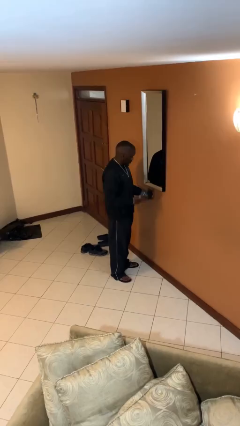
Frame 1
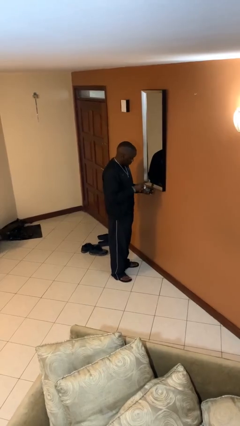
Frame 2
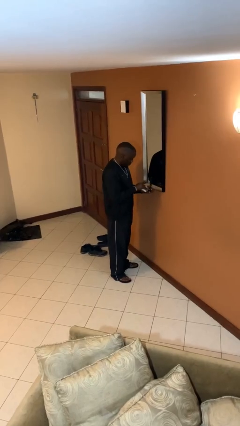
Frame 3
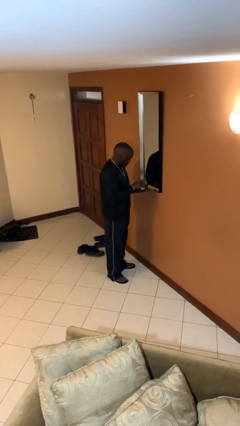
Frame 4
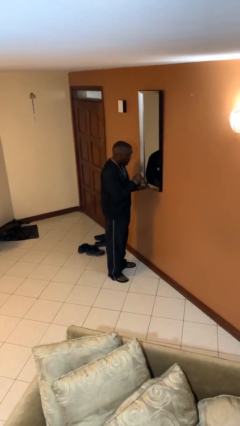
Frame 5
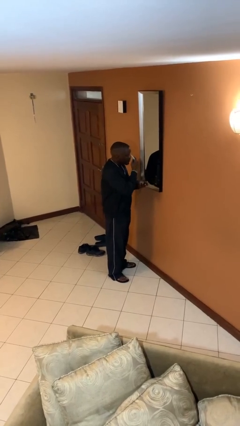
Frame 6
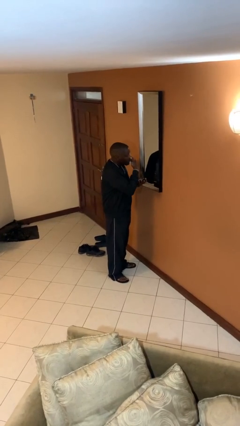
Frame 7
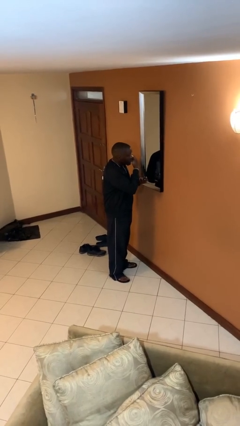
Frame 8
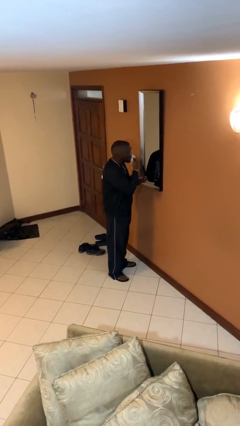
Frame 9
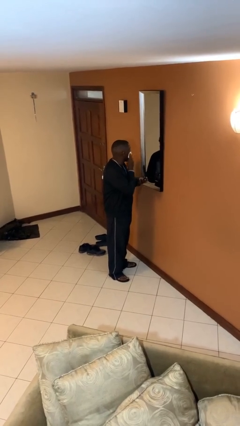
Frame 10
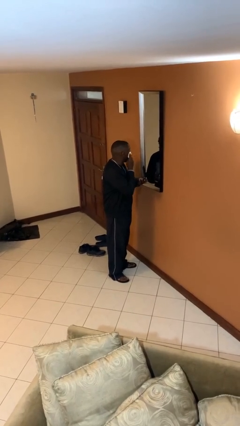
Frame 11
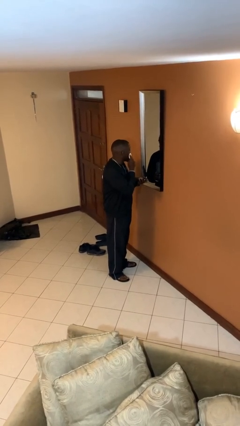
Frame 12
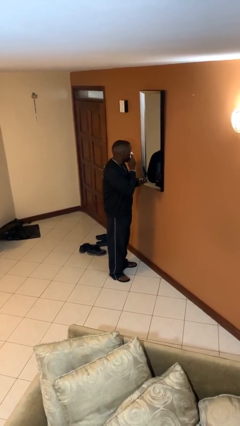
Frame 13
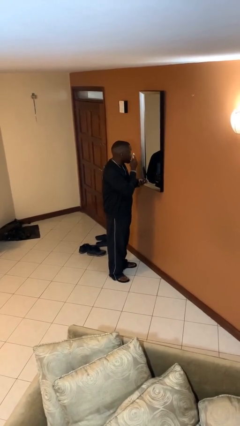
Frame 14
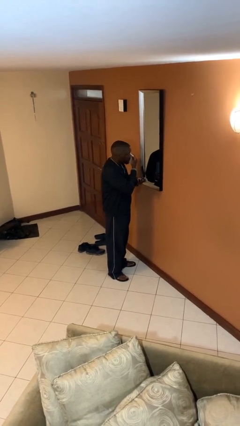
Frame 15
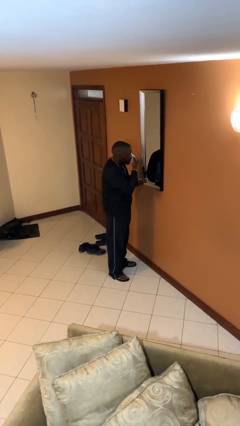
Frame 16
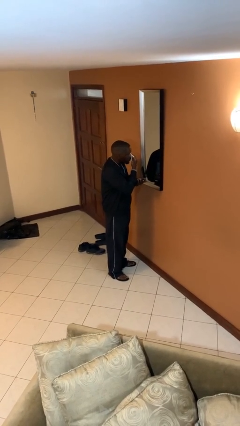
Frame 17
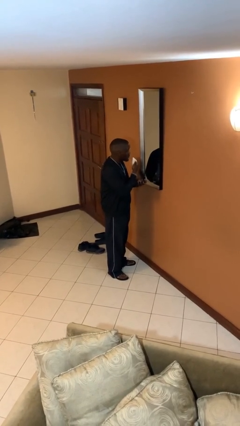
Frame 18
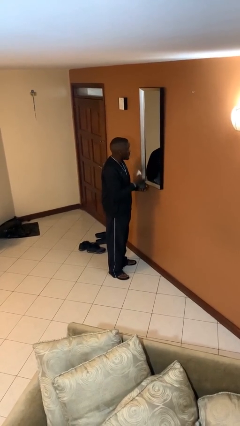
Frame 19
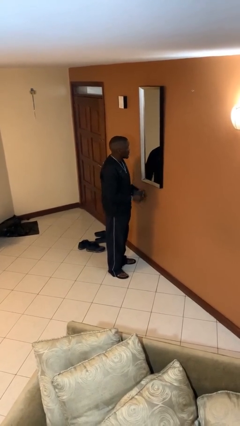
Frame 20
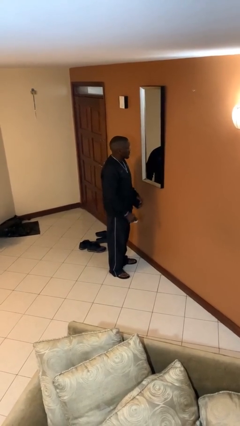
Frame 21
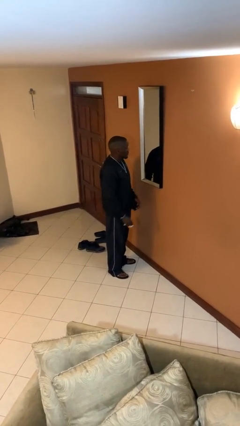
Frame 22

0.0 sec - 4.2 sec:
person applies foundation makeup

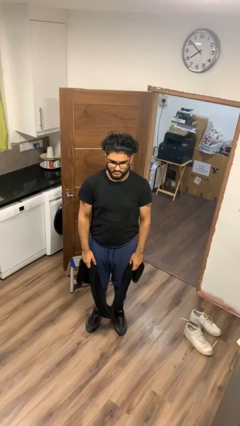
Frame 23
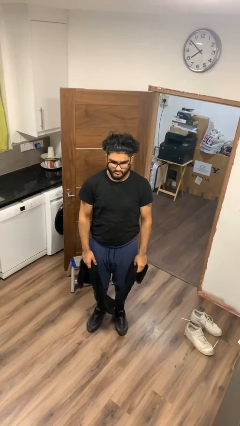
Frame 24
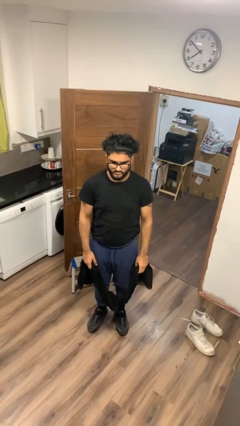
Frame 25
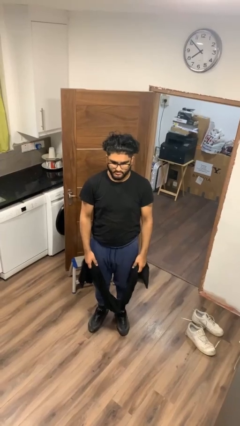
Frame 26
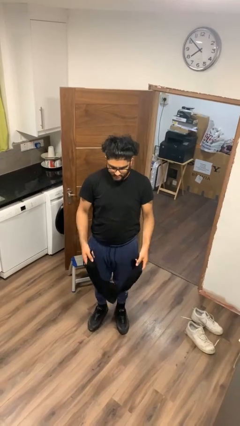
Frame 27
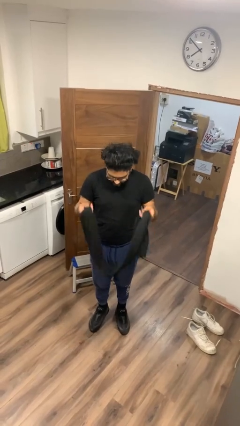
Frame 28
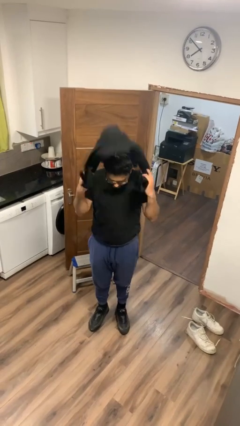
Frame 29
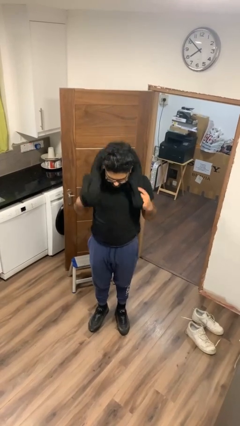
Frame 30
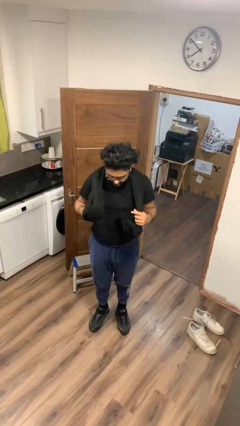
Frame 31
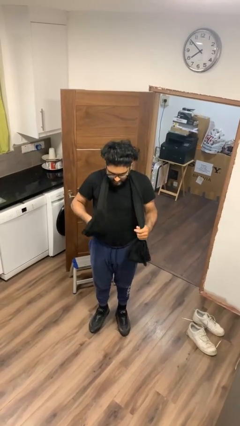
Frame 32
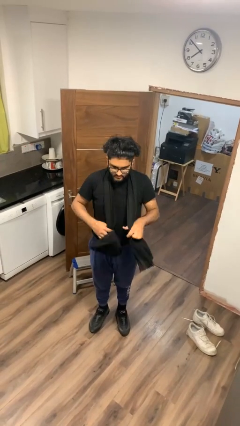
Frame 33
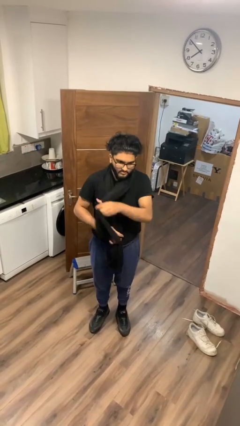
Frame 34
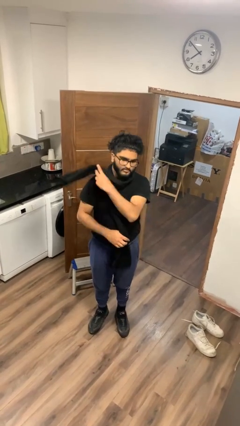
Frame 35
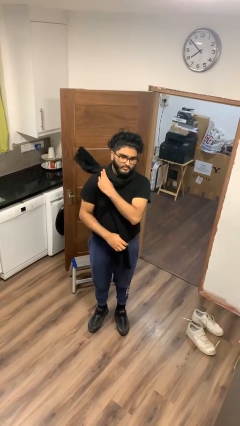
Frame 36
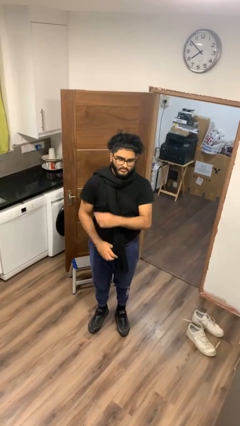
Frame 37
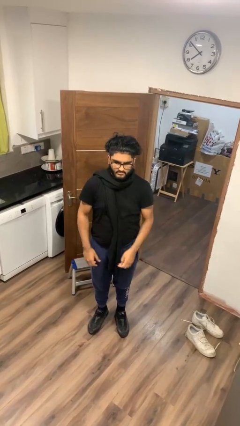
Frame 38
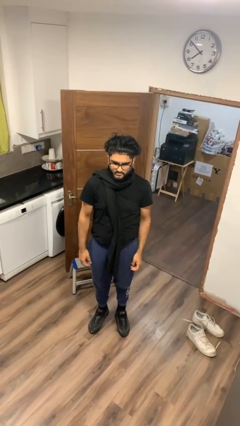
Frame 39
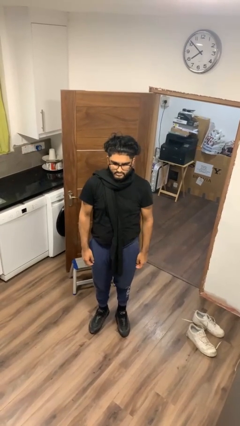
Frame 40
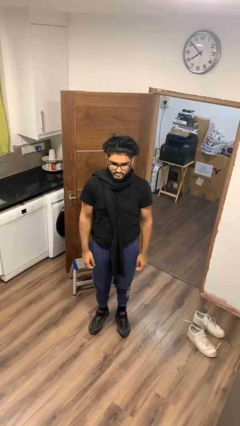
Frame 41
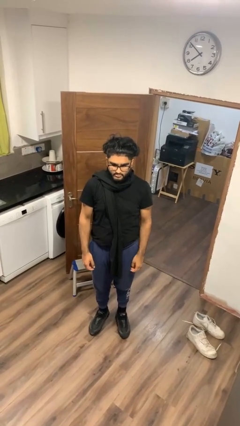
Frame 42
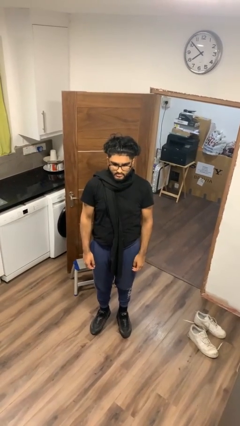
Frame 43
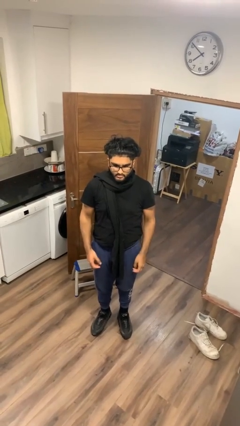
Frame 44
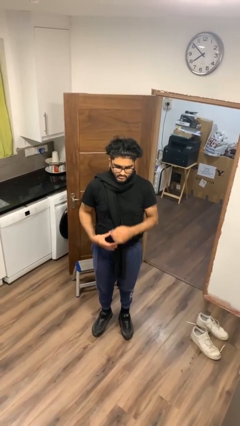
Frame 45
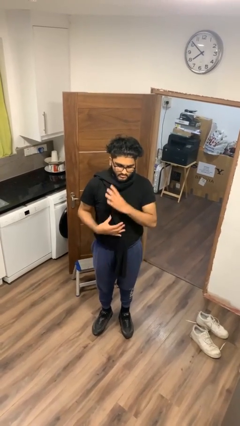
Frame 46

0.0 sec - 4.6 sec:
person puts on scarf

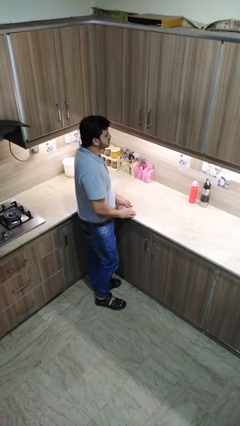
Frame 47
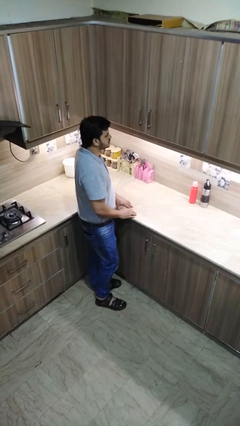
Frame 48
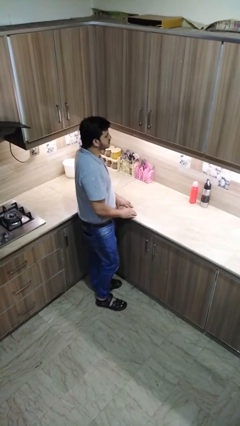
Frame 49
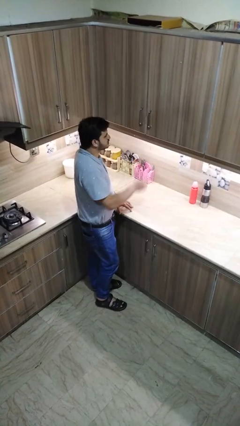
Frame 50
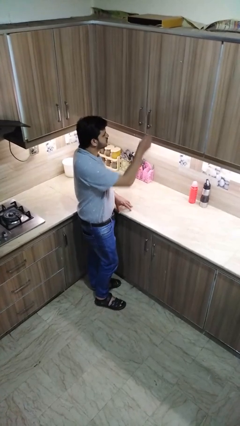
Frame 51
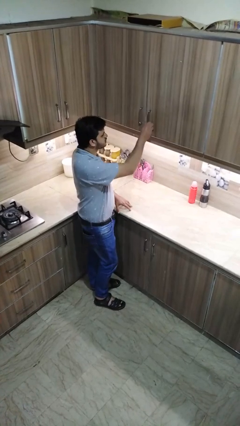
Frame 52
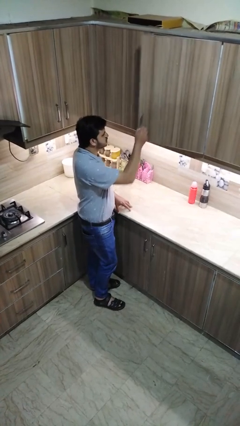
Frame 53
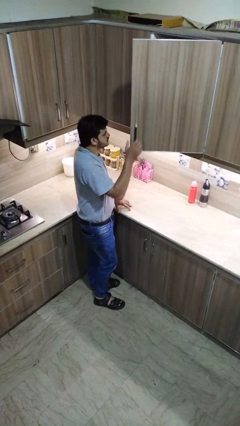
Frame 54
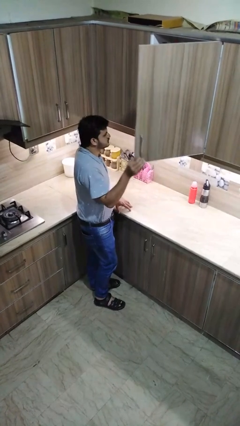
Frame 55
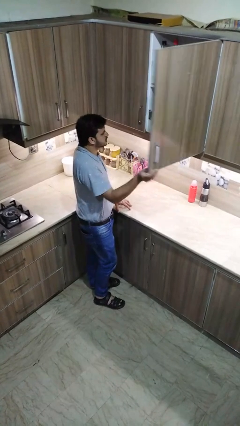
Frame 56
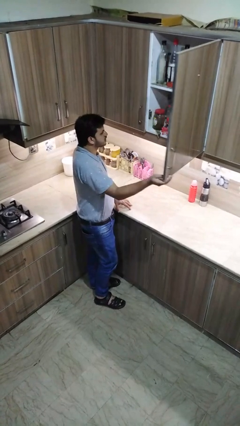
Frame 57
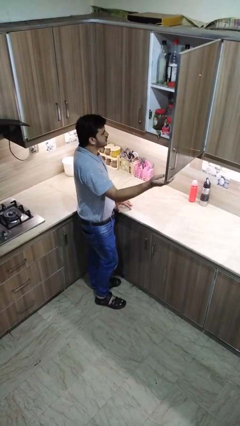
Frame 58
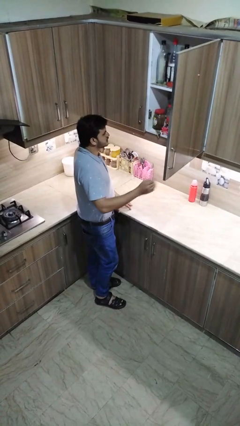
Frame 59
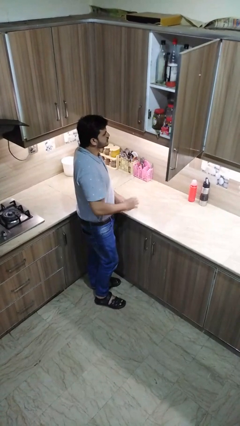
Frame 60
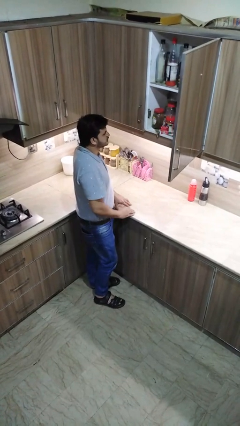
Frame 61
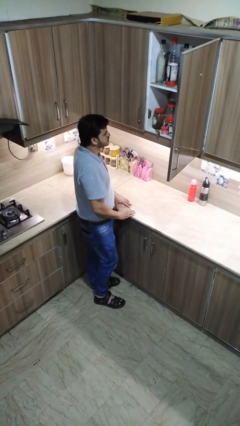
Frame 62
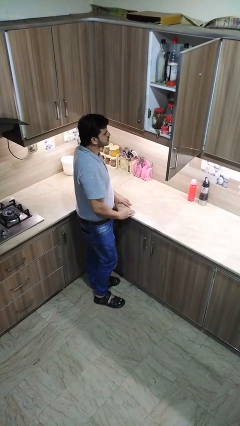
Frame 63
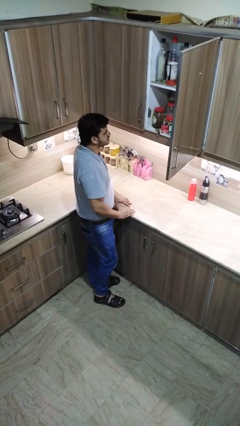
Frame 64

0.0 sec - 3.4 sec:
person opens cabinet

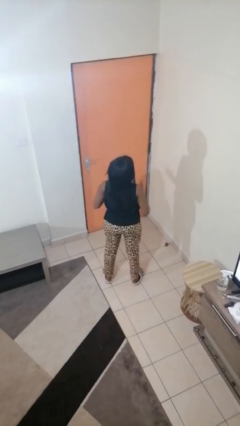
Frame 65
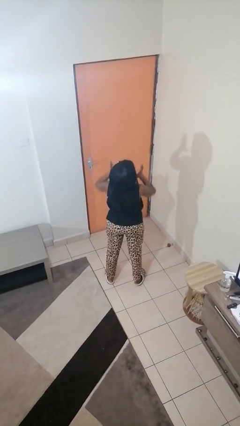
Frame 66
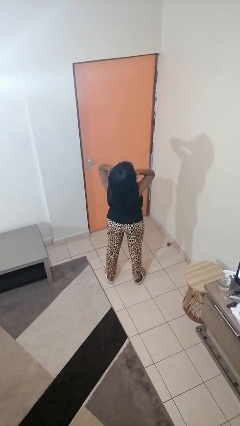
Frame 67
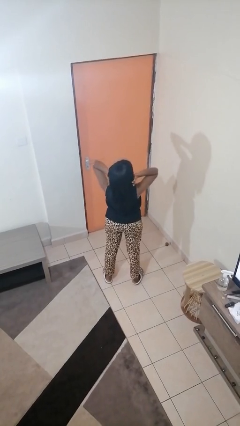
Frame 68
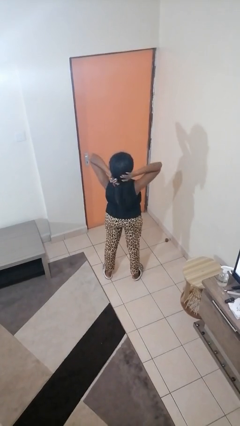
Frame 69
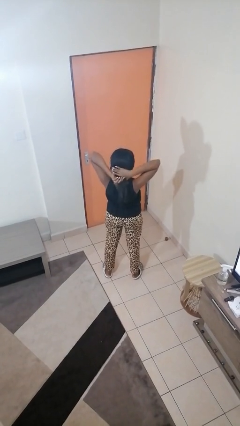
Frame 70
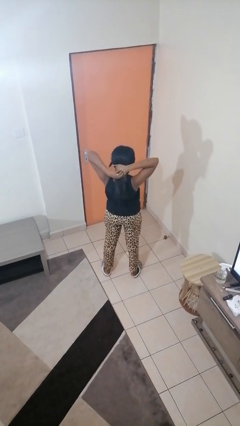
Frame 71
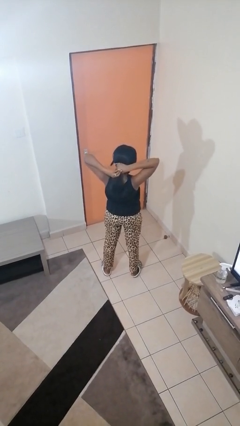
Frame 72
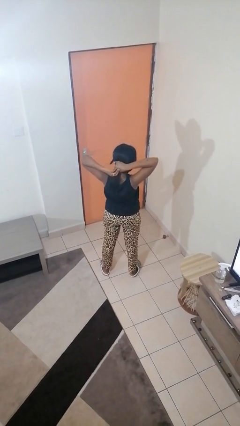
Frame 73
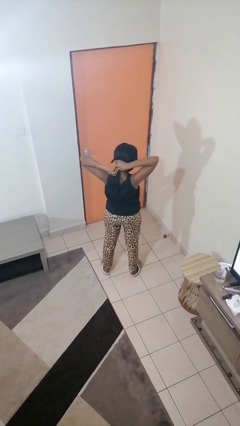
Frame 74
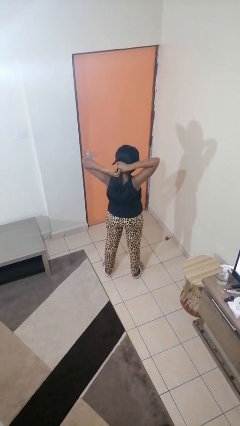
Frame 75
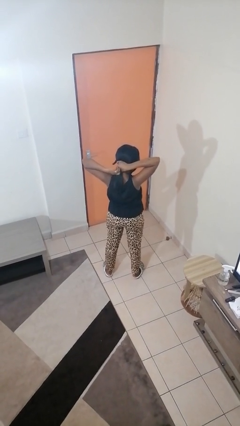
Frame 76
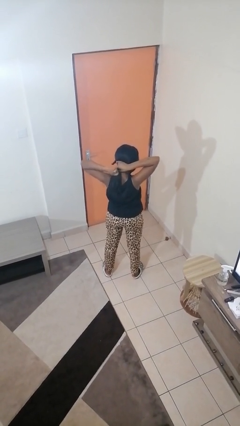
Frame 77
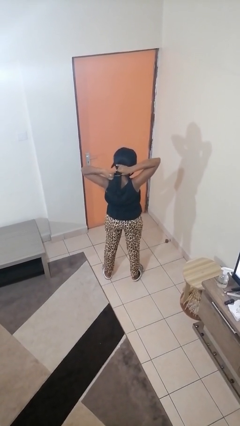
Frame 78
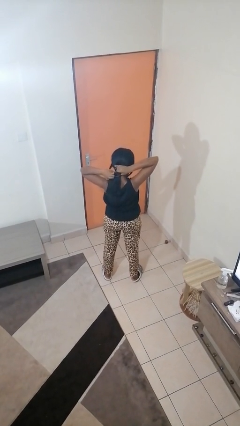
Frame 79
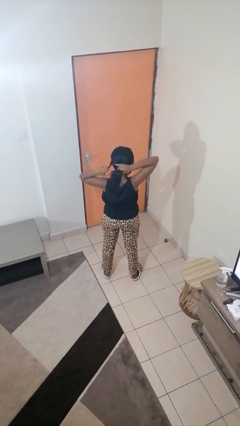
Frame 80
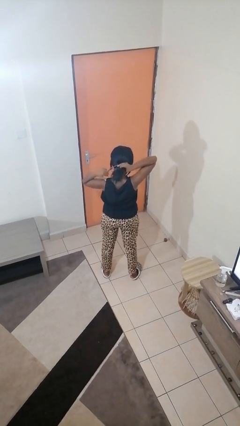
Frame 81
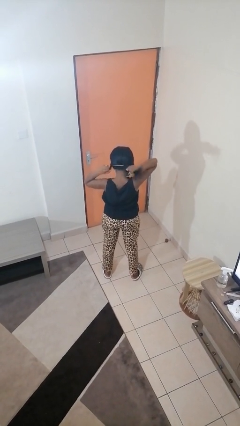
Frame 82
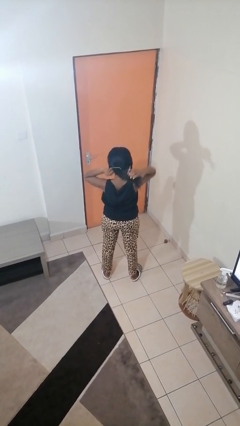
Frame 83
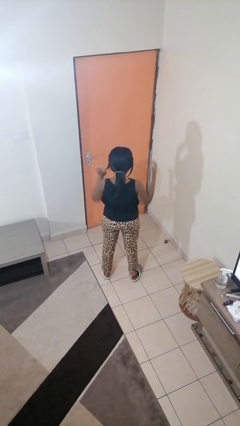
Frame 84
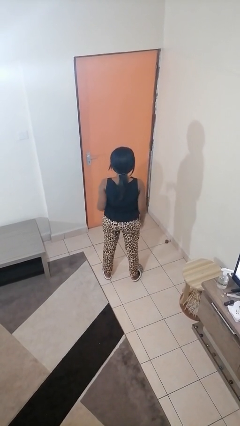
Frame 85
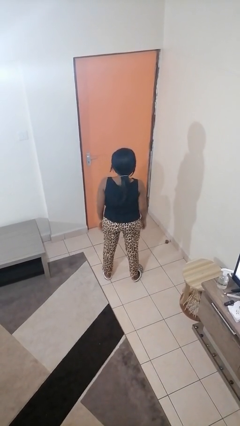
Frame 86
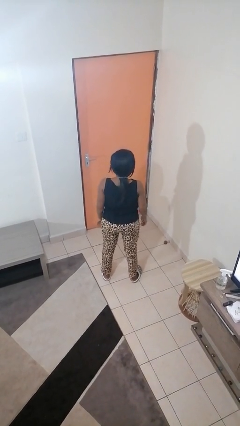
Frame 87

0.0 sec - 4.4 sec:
person puts hair in ponytail

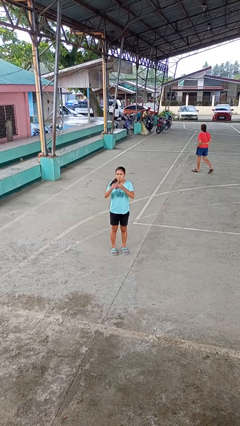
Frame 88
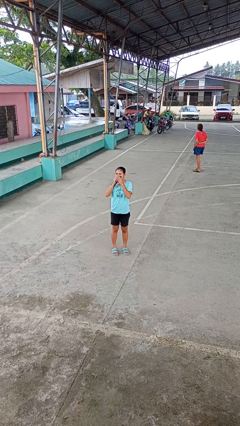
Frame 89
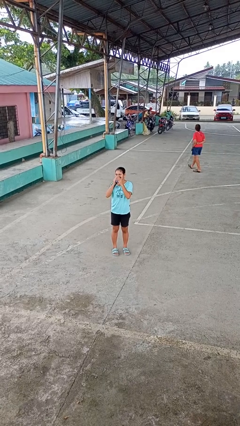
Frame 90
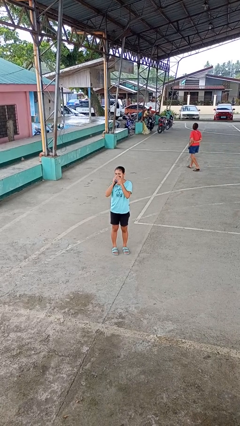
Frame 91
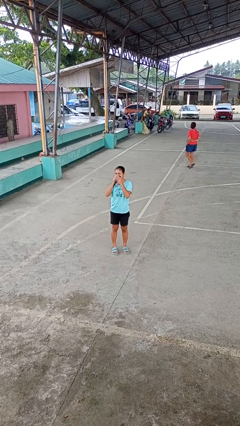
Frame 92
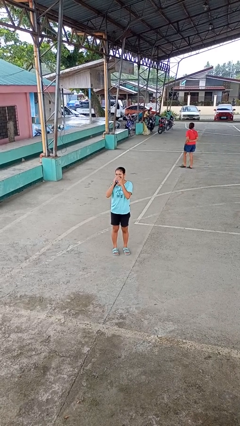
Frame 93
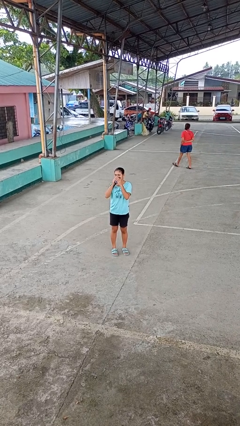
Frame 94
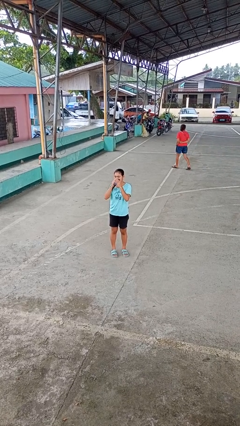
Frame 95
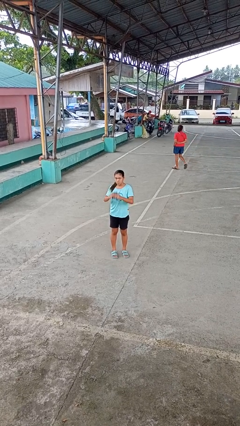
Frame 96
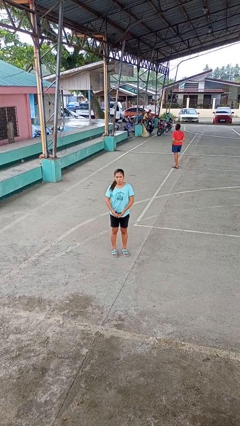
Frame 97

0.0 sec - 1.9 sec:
person blows nose
